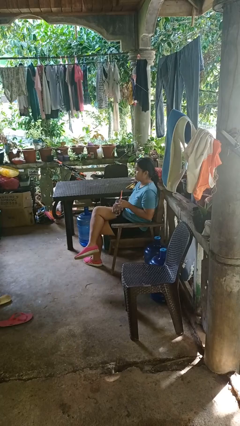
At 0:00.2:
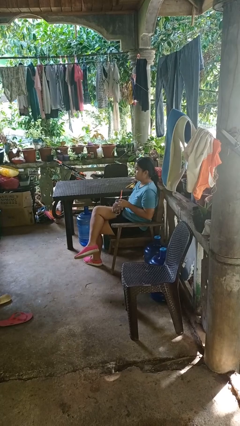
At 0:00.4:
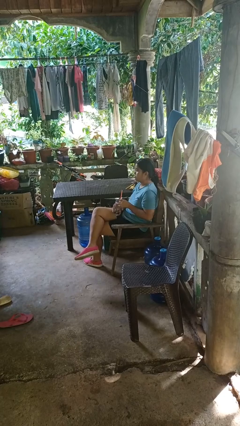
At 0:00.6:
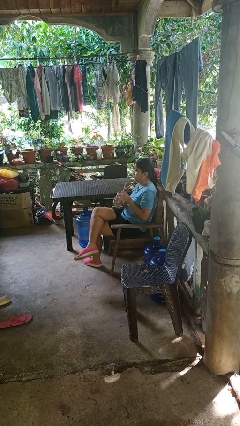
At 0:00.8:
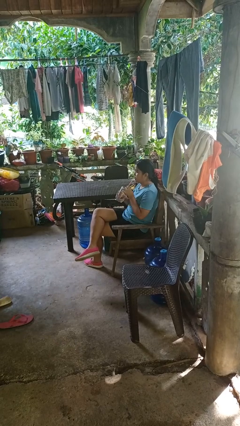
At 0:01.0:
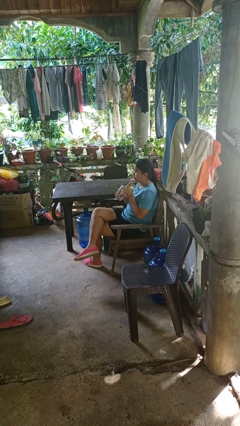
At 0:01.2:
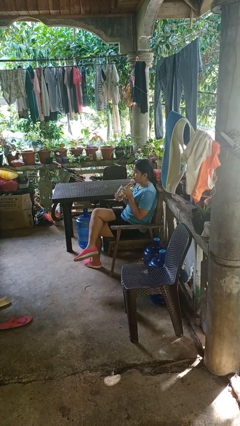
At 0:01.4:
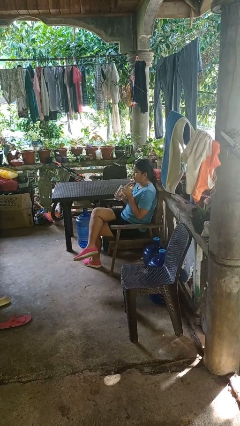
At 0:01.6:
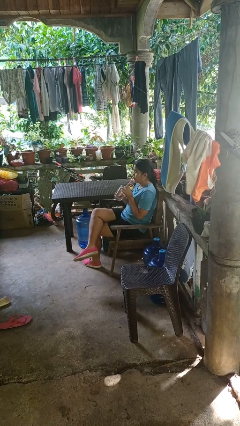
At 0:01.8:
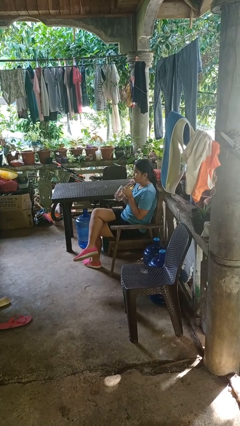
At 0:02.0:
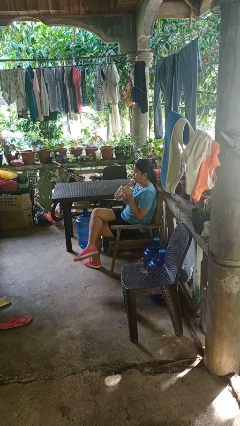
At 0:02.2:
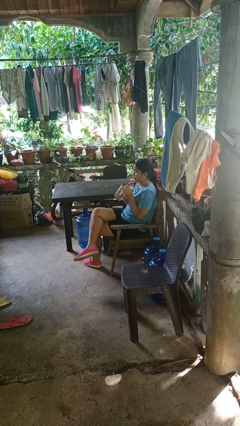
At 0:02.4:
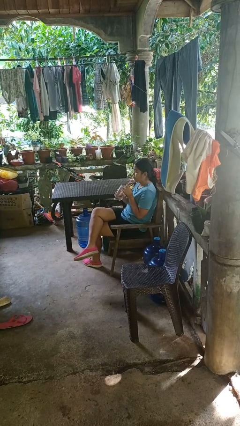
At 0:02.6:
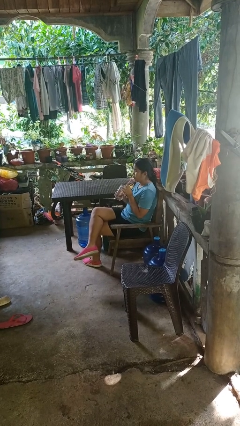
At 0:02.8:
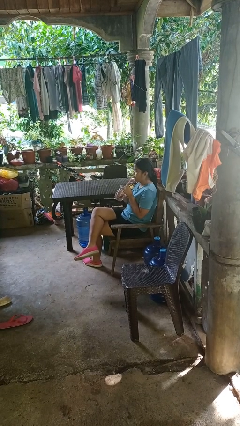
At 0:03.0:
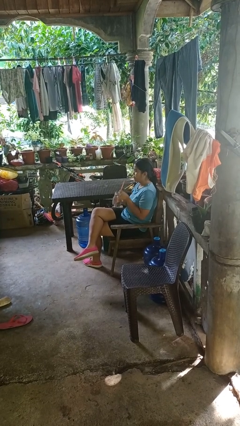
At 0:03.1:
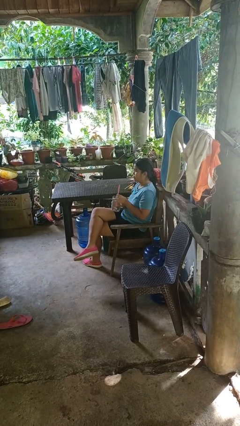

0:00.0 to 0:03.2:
person drinks from straw

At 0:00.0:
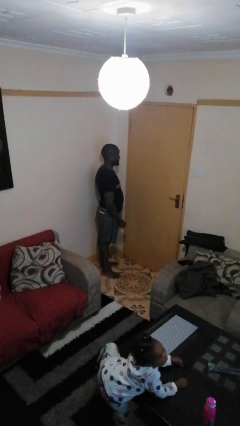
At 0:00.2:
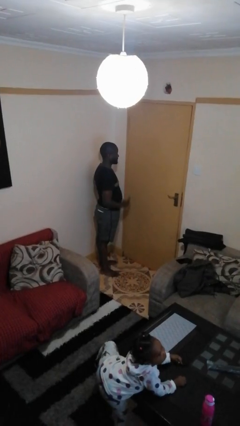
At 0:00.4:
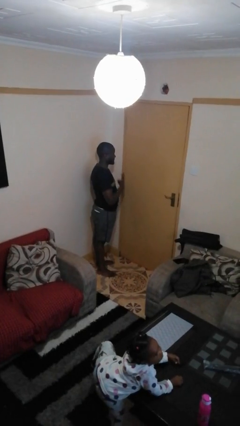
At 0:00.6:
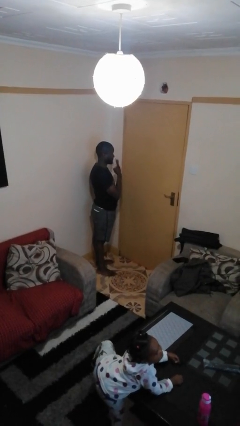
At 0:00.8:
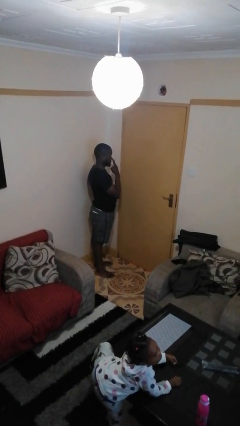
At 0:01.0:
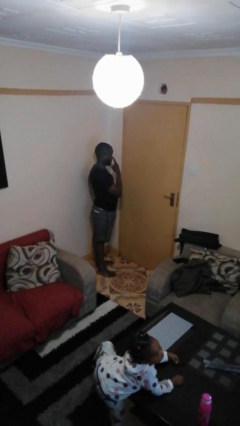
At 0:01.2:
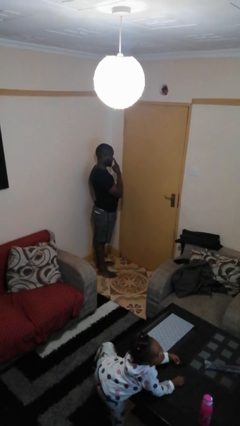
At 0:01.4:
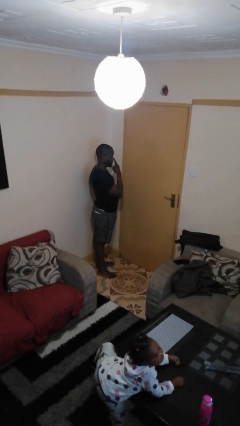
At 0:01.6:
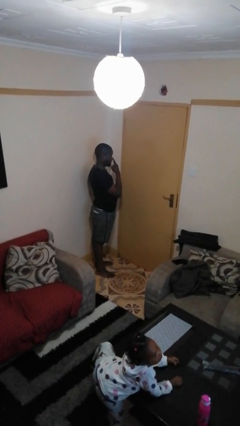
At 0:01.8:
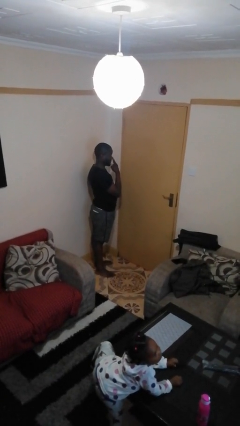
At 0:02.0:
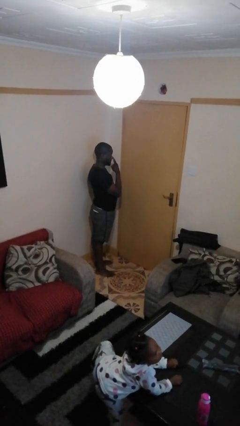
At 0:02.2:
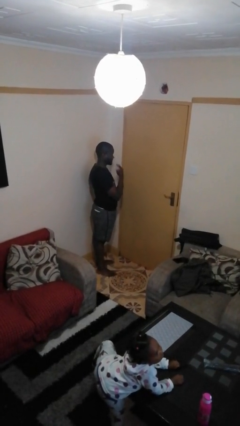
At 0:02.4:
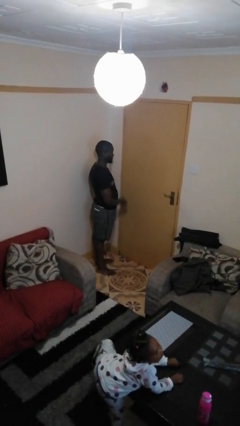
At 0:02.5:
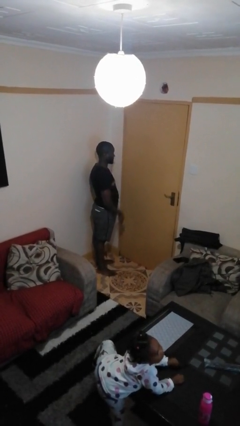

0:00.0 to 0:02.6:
person gestures watch closely

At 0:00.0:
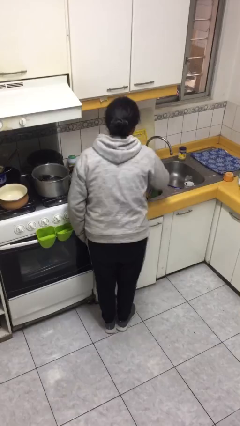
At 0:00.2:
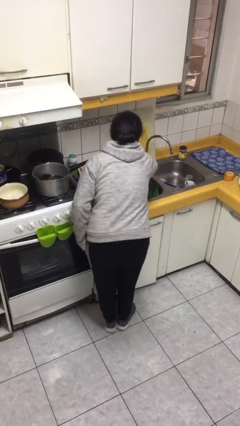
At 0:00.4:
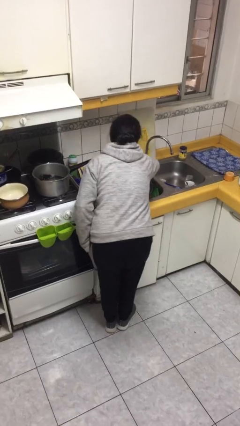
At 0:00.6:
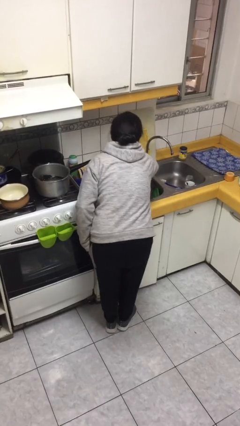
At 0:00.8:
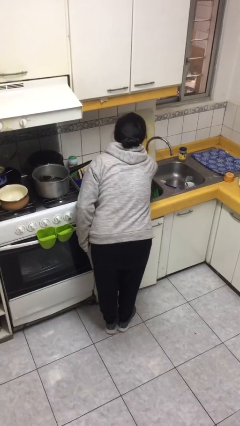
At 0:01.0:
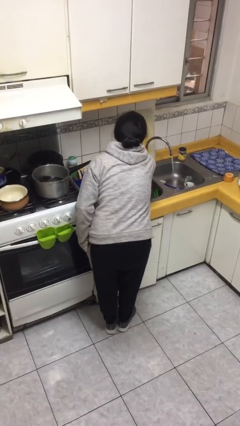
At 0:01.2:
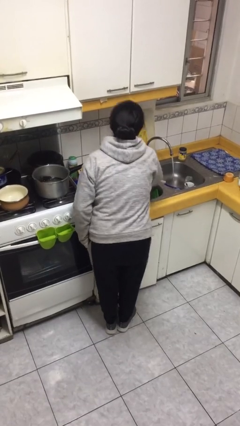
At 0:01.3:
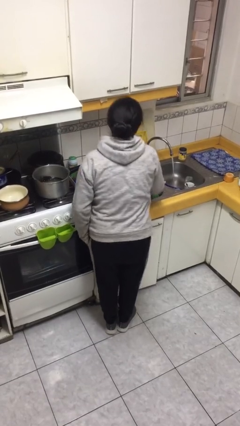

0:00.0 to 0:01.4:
person turns on faucet

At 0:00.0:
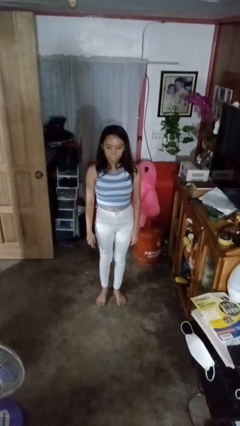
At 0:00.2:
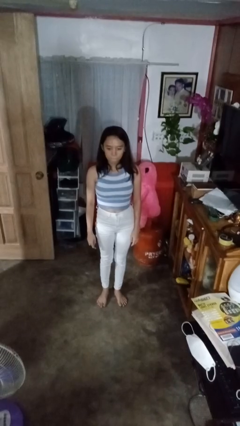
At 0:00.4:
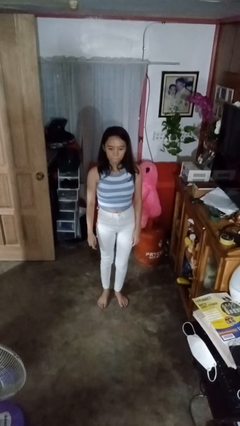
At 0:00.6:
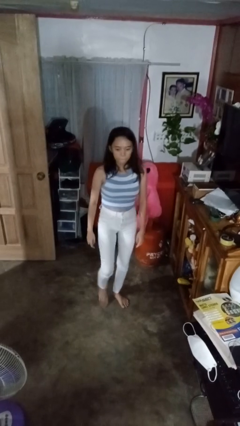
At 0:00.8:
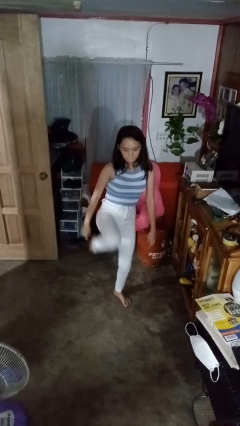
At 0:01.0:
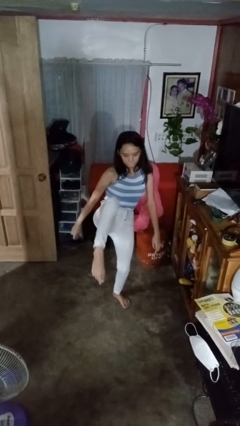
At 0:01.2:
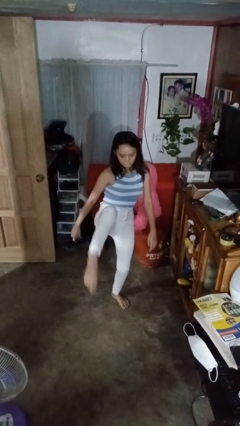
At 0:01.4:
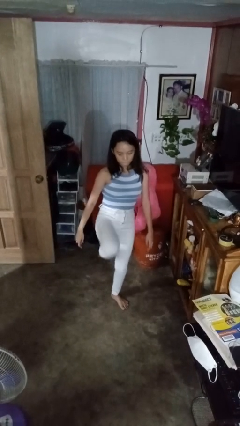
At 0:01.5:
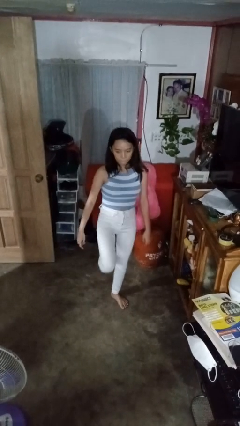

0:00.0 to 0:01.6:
person karate kicks

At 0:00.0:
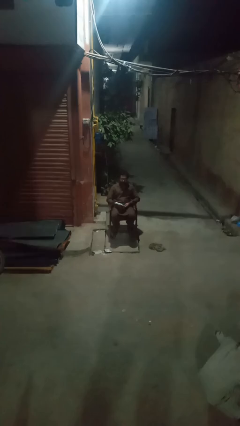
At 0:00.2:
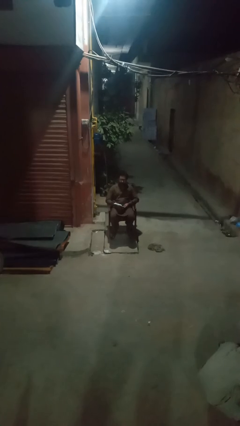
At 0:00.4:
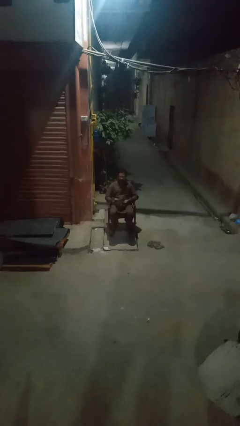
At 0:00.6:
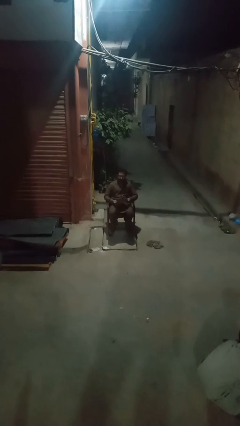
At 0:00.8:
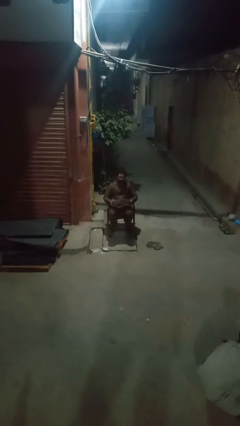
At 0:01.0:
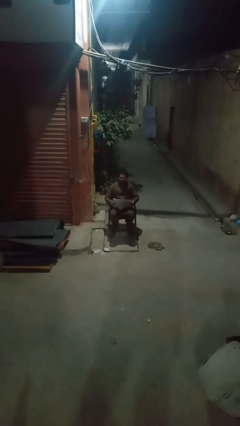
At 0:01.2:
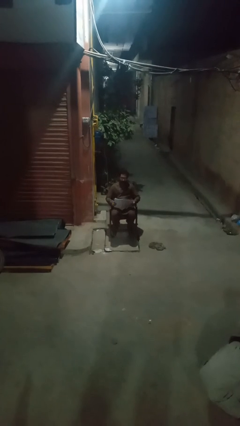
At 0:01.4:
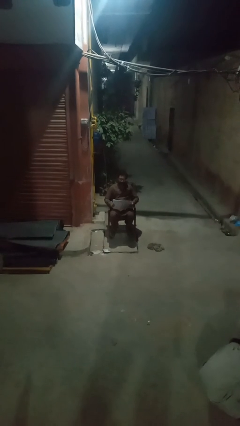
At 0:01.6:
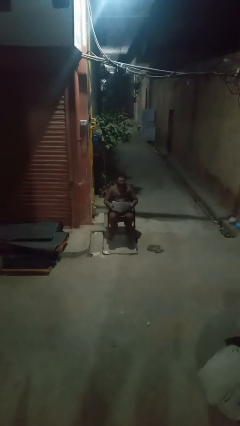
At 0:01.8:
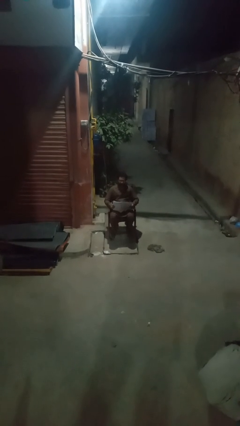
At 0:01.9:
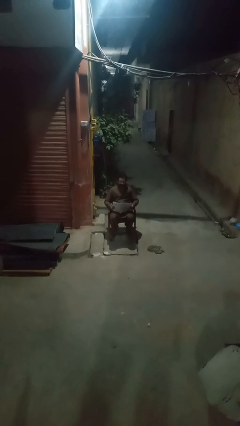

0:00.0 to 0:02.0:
person reads magazine

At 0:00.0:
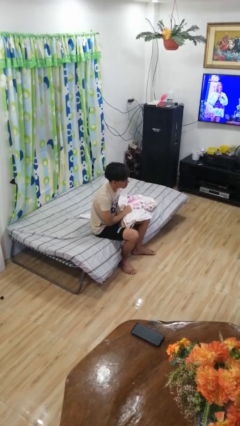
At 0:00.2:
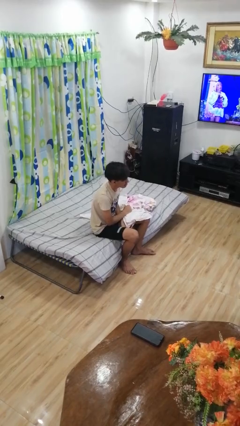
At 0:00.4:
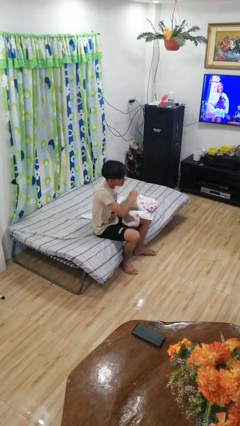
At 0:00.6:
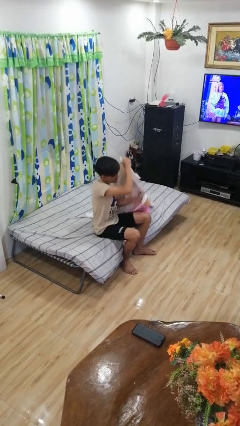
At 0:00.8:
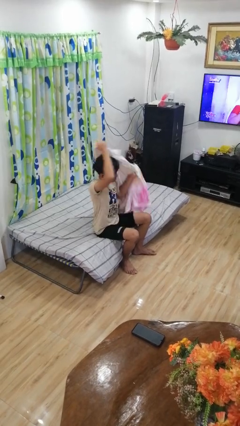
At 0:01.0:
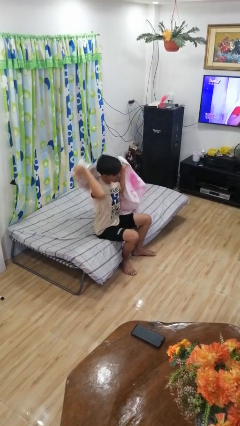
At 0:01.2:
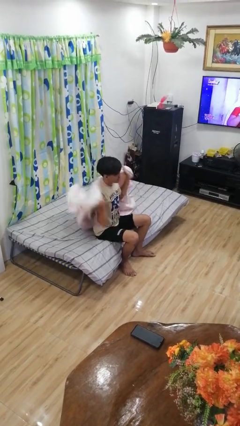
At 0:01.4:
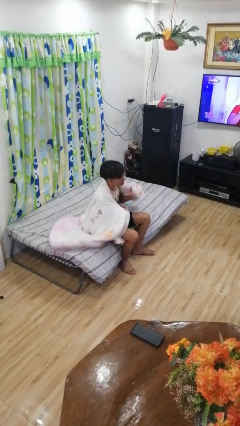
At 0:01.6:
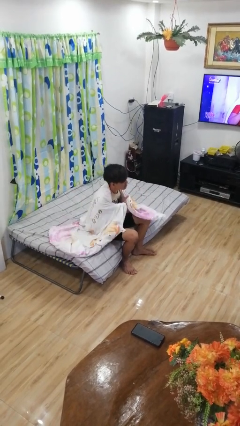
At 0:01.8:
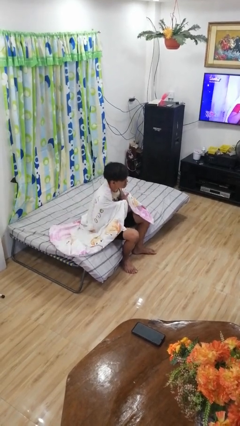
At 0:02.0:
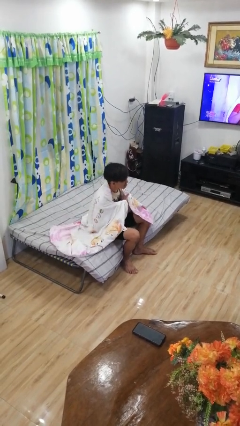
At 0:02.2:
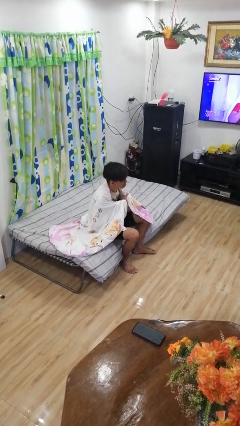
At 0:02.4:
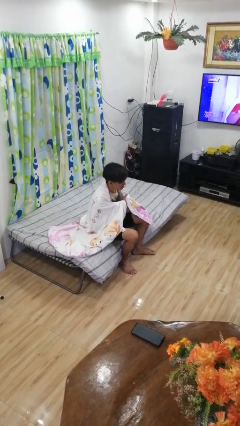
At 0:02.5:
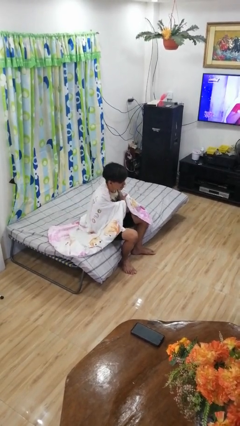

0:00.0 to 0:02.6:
person covers with blanket

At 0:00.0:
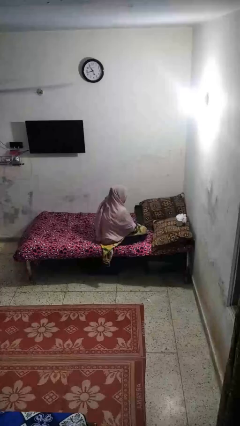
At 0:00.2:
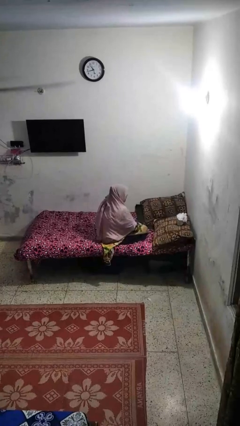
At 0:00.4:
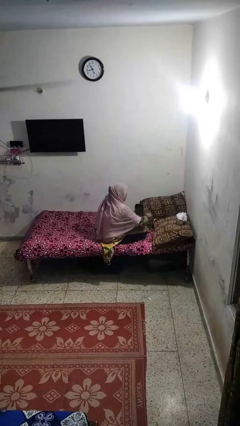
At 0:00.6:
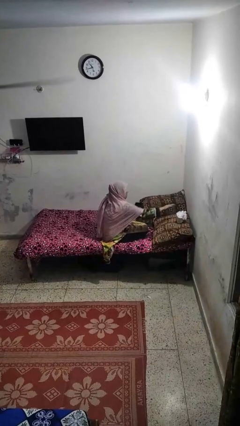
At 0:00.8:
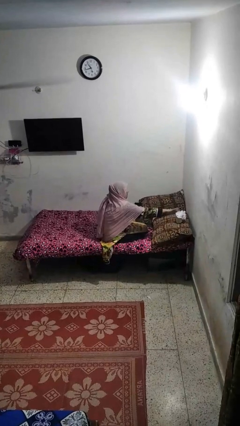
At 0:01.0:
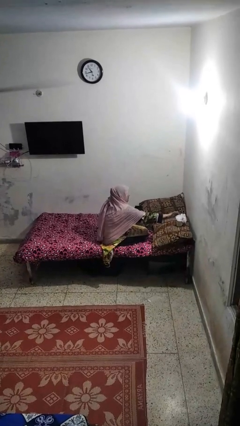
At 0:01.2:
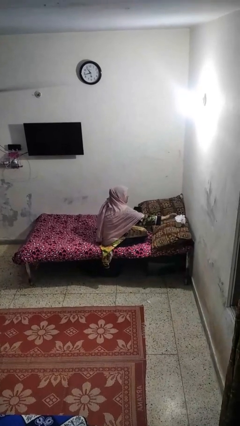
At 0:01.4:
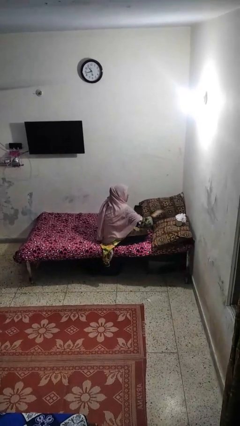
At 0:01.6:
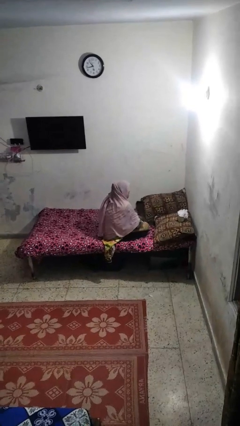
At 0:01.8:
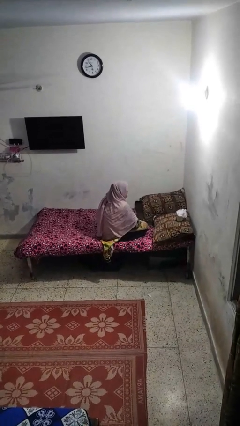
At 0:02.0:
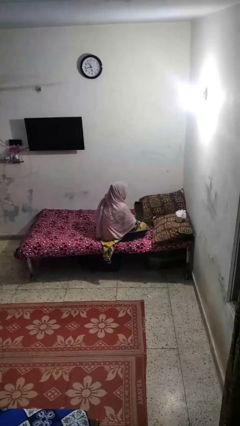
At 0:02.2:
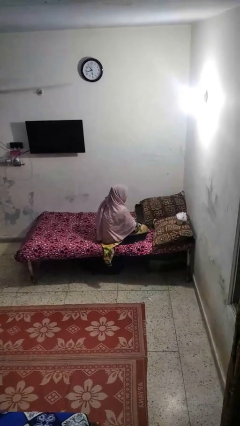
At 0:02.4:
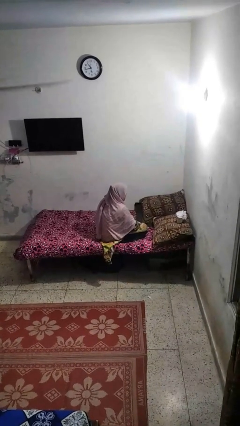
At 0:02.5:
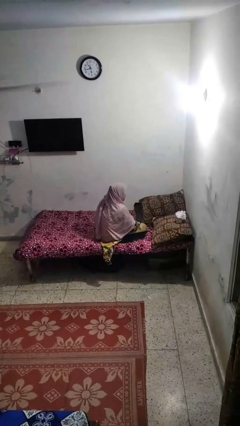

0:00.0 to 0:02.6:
person arranges flowers in vase

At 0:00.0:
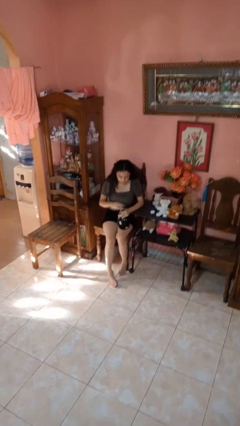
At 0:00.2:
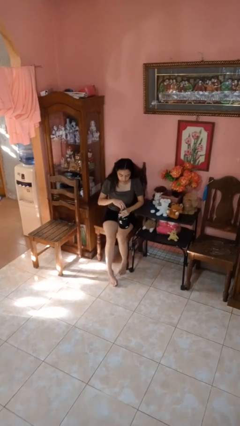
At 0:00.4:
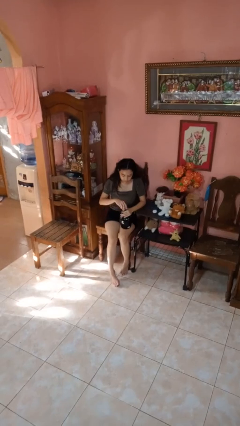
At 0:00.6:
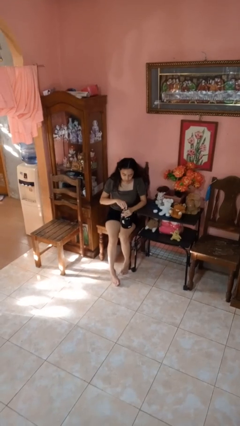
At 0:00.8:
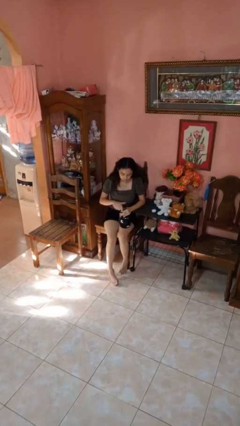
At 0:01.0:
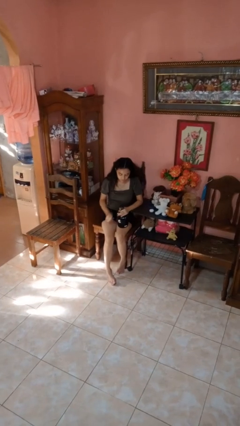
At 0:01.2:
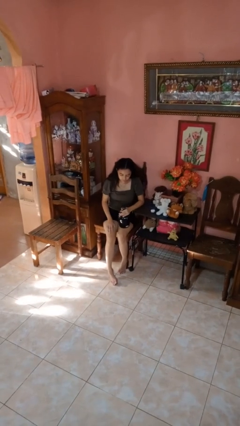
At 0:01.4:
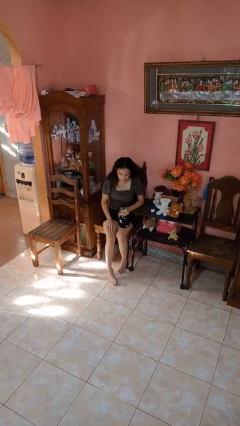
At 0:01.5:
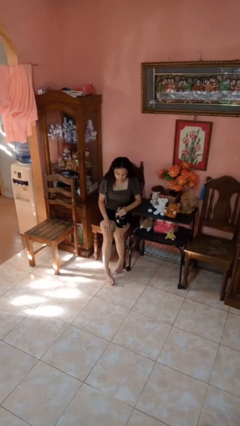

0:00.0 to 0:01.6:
person screws lid to bottle
